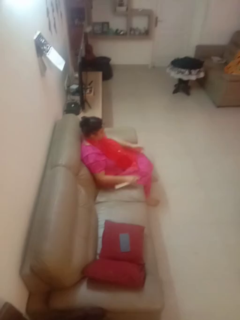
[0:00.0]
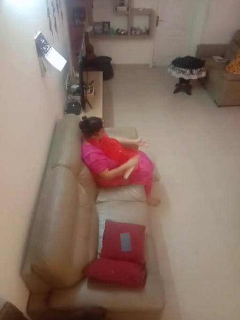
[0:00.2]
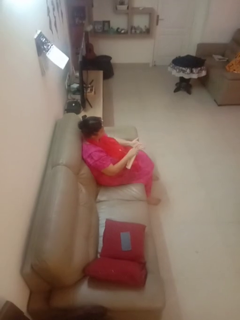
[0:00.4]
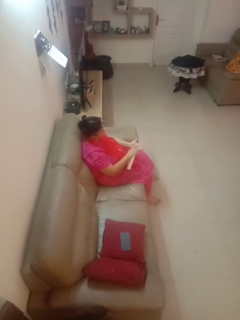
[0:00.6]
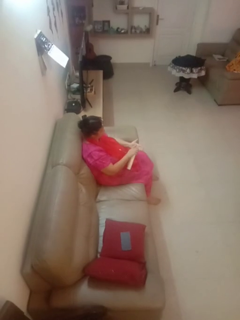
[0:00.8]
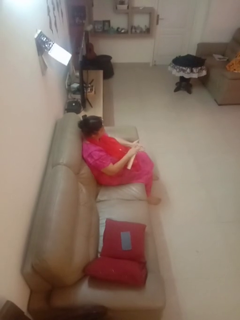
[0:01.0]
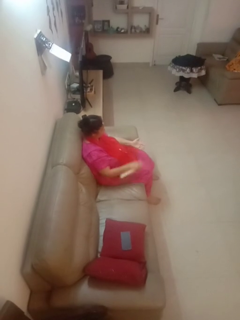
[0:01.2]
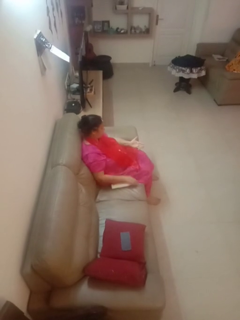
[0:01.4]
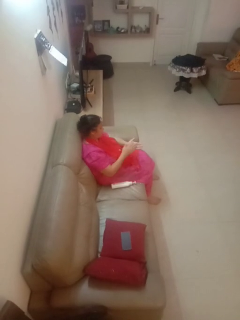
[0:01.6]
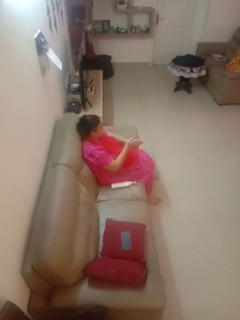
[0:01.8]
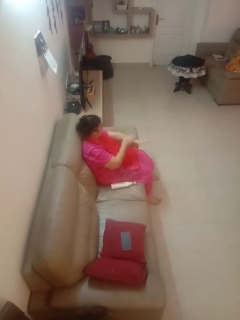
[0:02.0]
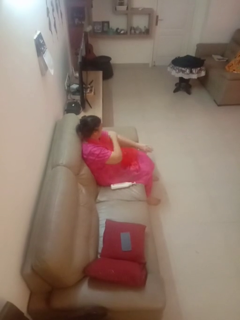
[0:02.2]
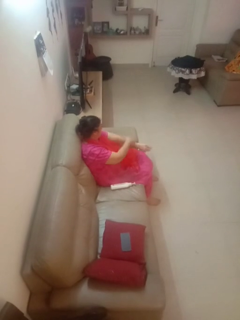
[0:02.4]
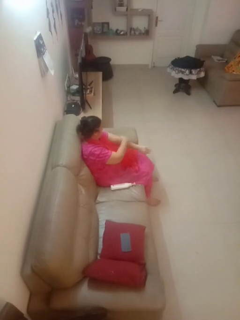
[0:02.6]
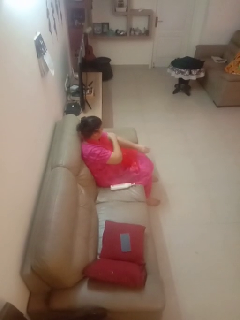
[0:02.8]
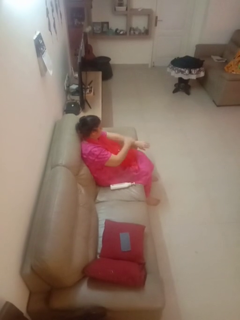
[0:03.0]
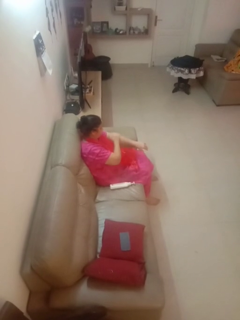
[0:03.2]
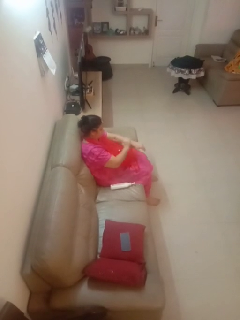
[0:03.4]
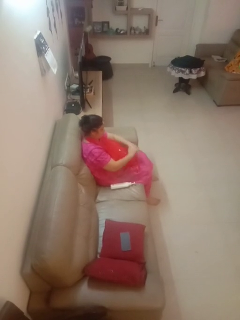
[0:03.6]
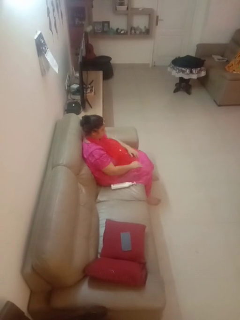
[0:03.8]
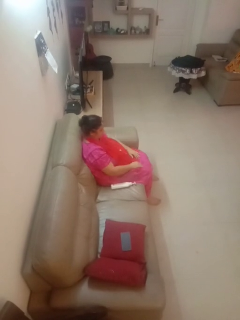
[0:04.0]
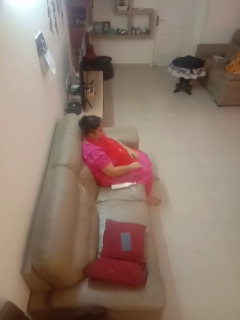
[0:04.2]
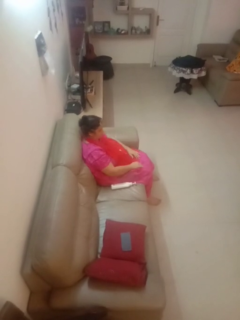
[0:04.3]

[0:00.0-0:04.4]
person applies sunscreen

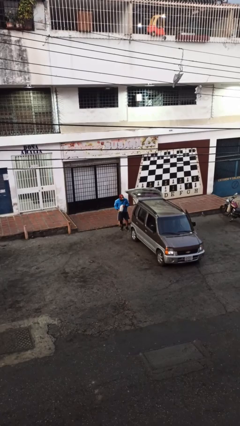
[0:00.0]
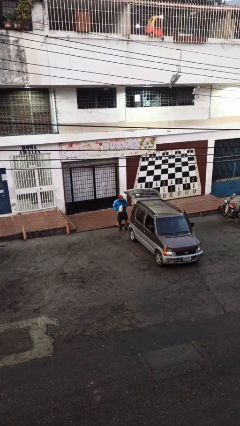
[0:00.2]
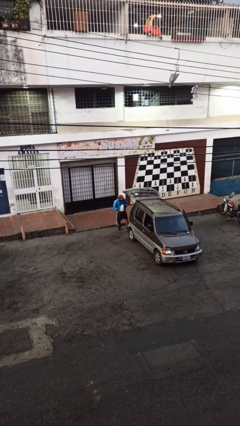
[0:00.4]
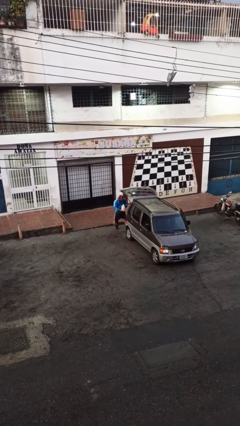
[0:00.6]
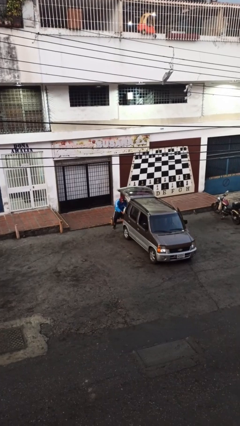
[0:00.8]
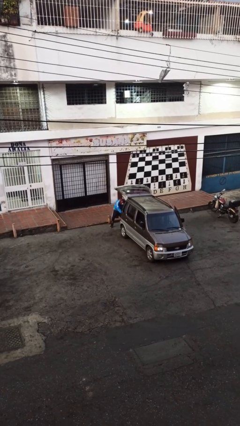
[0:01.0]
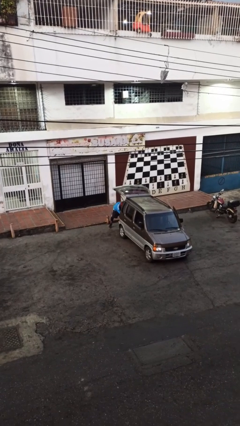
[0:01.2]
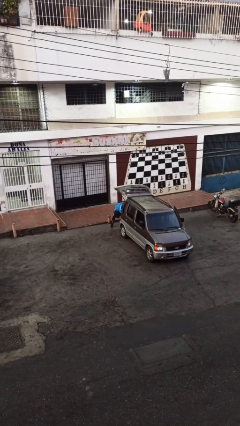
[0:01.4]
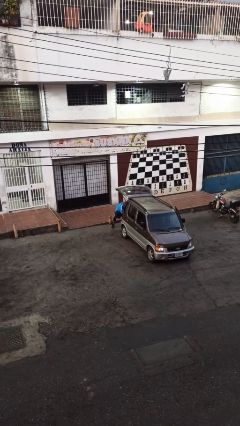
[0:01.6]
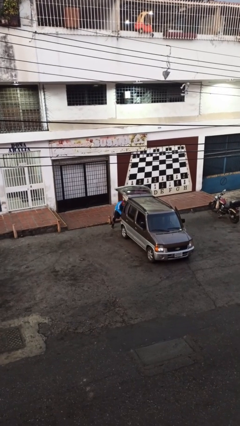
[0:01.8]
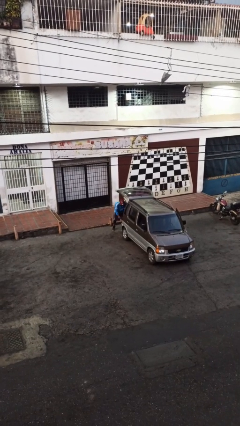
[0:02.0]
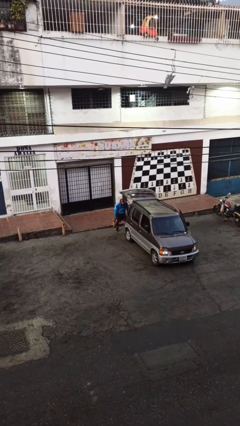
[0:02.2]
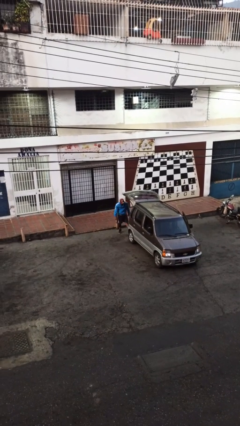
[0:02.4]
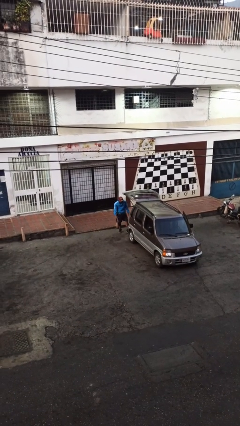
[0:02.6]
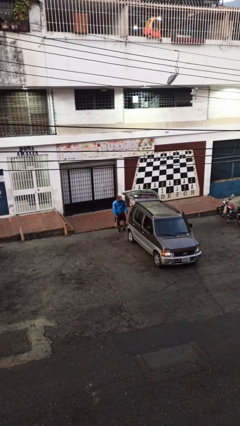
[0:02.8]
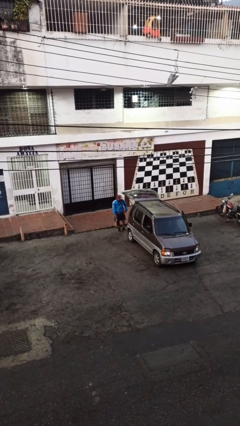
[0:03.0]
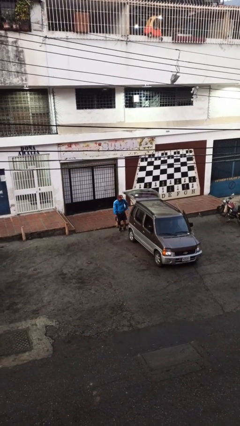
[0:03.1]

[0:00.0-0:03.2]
person loads car

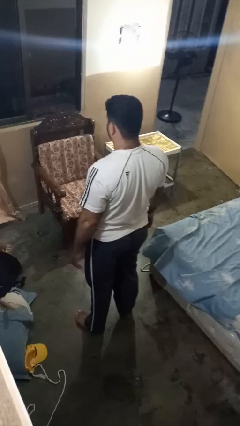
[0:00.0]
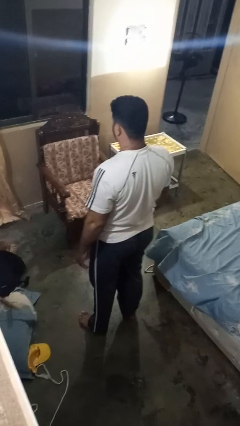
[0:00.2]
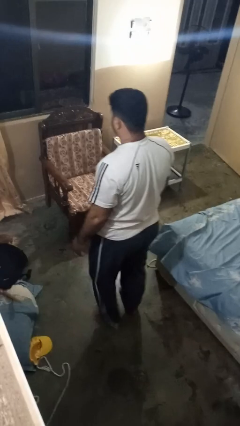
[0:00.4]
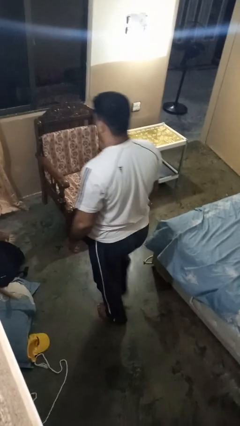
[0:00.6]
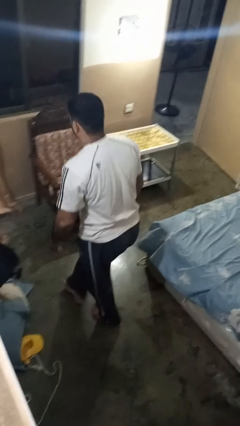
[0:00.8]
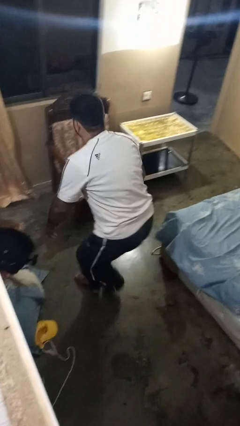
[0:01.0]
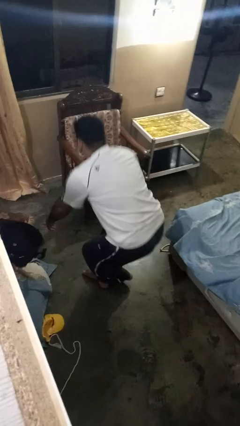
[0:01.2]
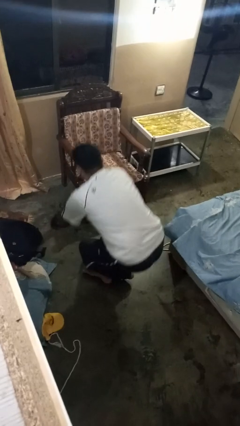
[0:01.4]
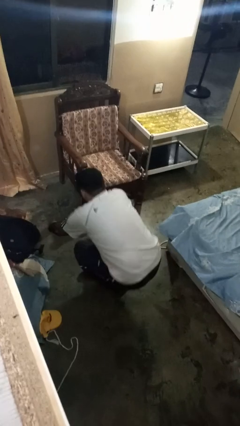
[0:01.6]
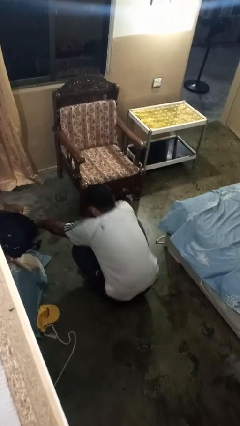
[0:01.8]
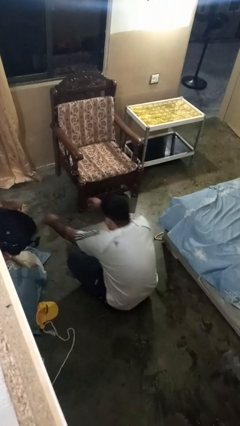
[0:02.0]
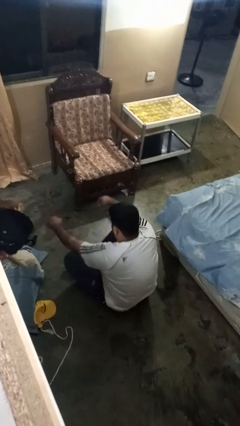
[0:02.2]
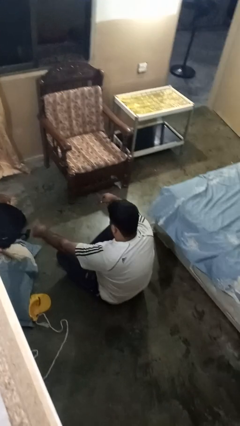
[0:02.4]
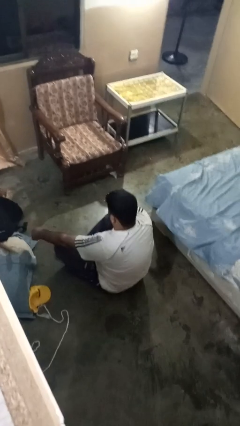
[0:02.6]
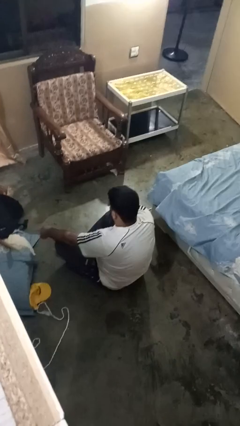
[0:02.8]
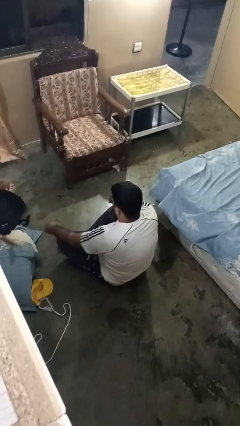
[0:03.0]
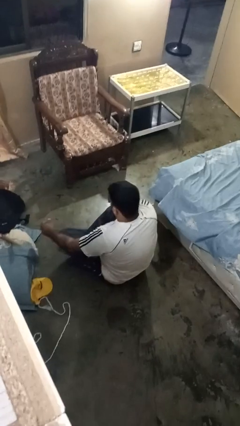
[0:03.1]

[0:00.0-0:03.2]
person crosses legs

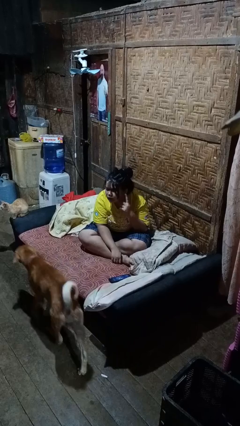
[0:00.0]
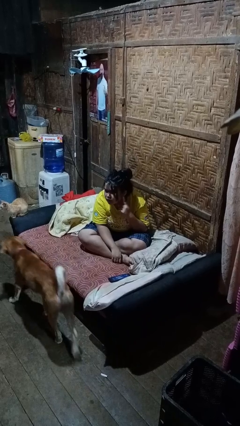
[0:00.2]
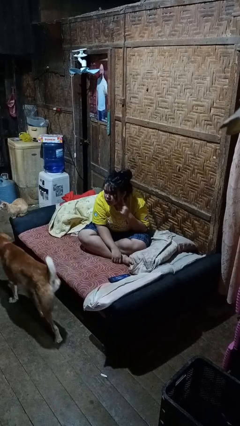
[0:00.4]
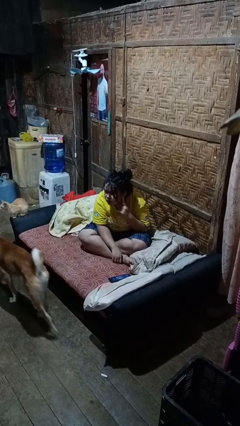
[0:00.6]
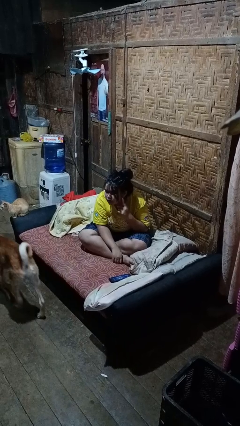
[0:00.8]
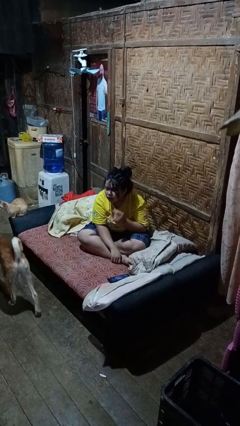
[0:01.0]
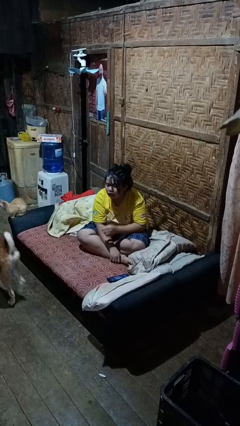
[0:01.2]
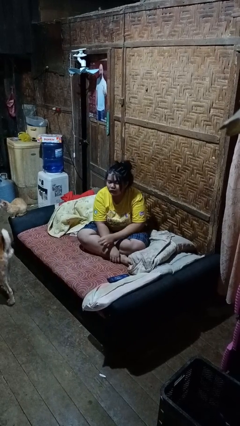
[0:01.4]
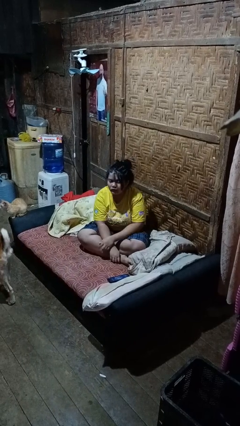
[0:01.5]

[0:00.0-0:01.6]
person gestures listen closely

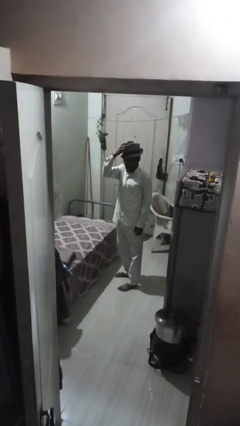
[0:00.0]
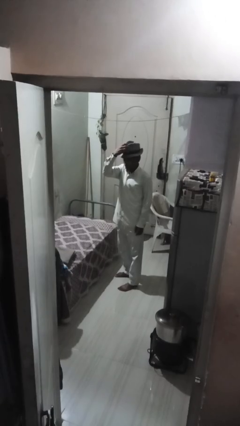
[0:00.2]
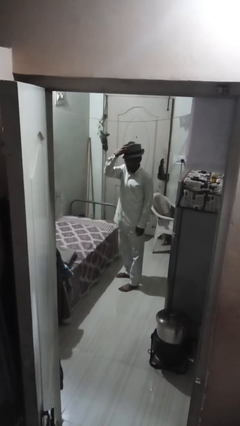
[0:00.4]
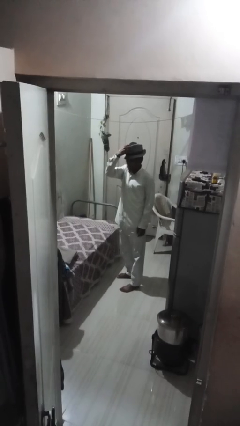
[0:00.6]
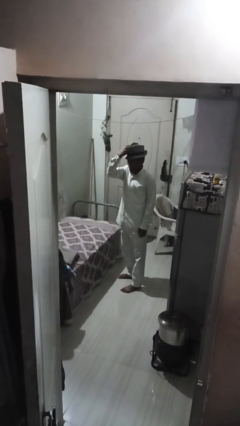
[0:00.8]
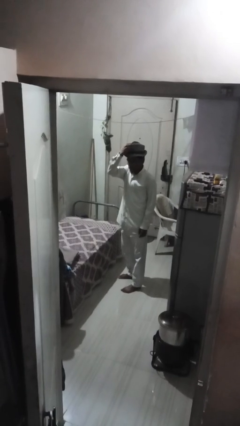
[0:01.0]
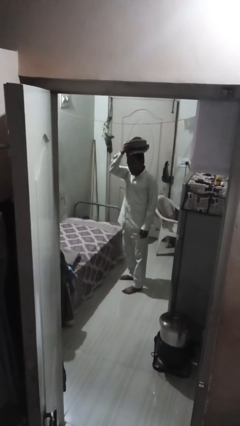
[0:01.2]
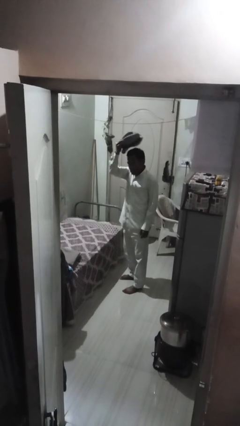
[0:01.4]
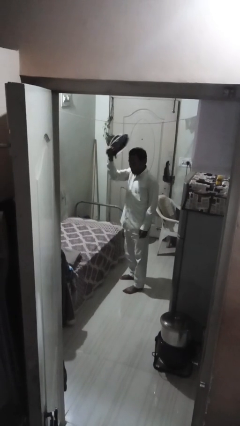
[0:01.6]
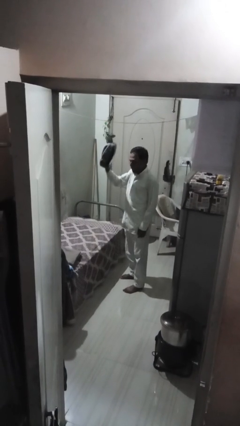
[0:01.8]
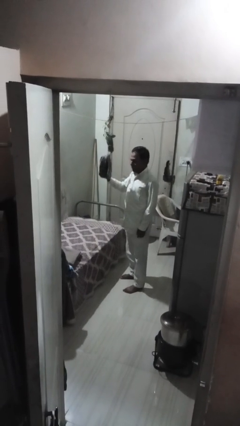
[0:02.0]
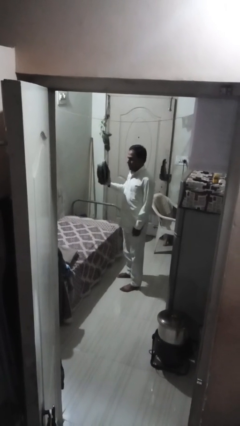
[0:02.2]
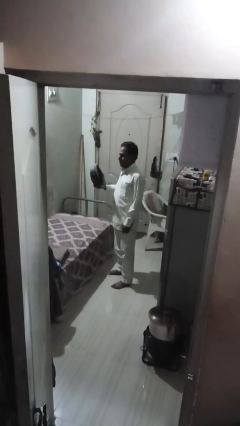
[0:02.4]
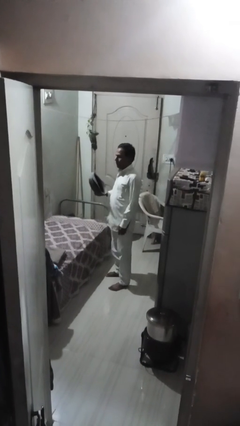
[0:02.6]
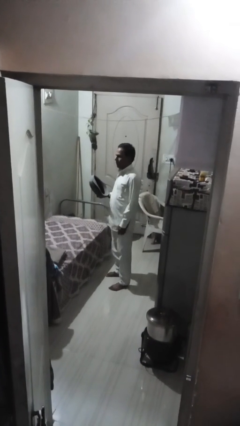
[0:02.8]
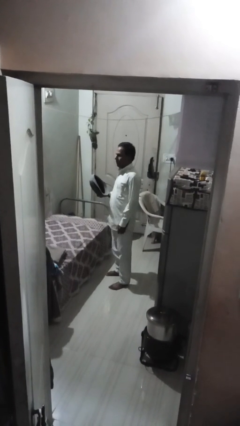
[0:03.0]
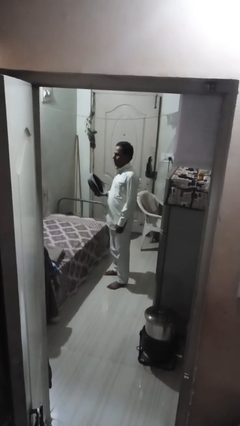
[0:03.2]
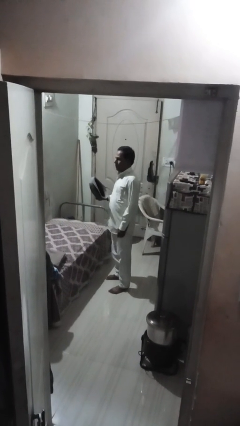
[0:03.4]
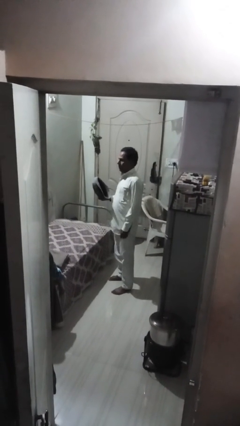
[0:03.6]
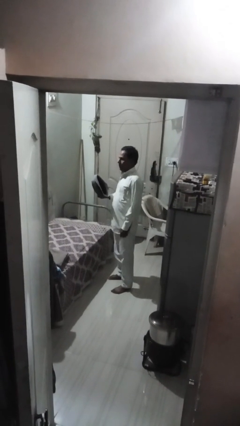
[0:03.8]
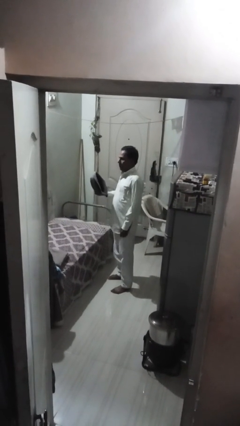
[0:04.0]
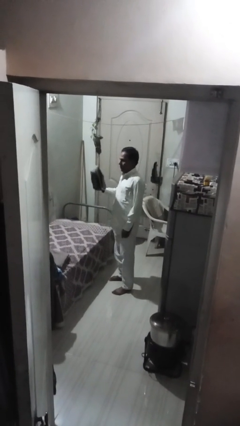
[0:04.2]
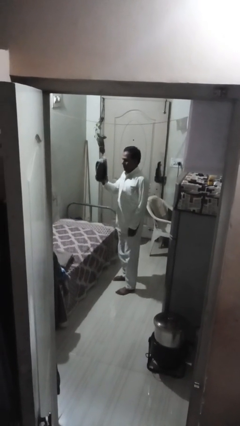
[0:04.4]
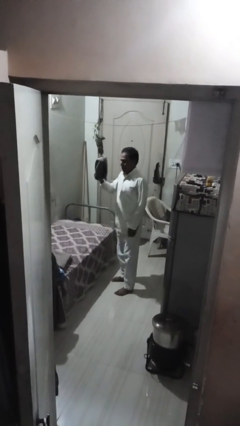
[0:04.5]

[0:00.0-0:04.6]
person takes off hat

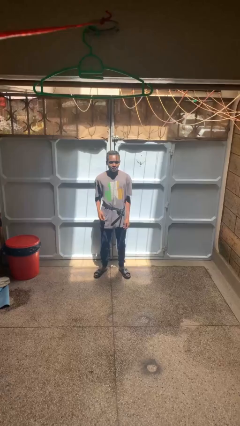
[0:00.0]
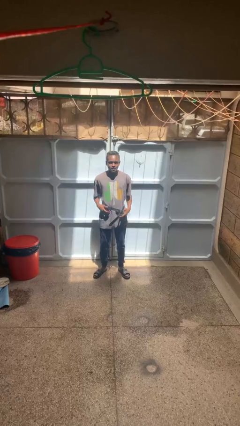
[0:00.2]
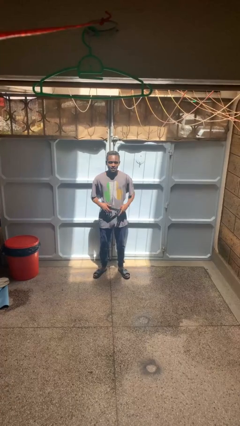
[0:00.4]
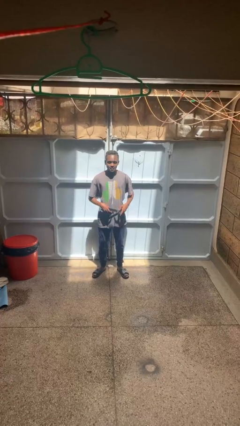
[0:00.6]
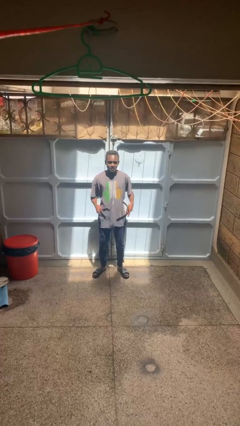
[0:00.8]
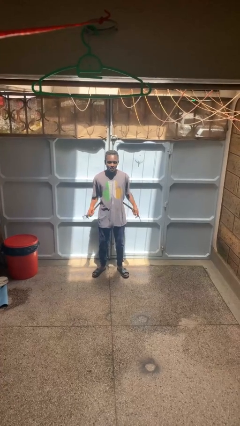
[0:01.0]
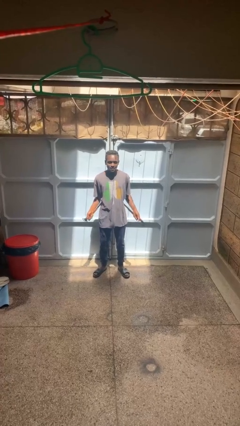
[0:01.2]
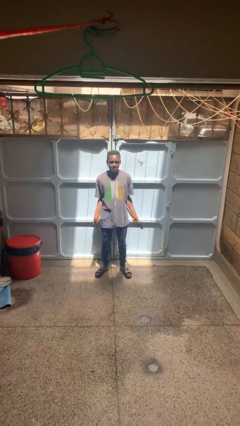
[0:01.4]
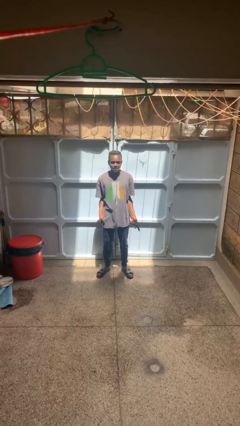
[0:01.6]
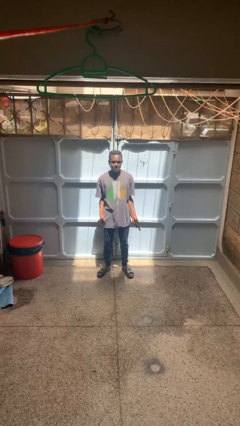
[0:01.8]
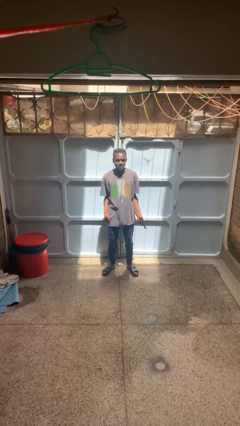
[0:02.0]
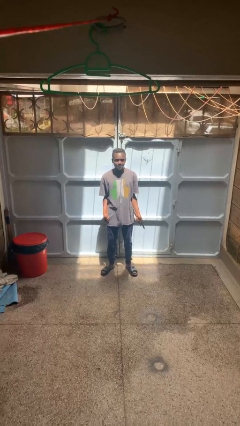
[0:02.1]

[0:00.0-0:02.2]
person takes off belt
